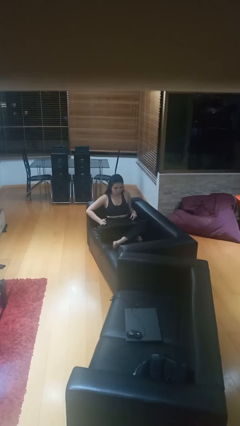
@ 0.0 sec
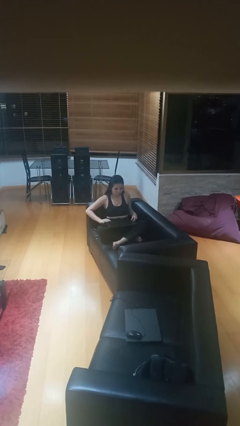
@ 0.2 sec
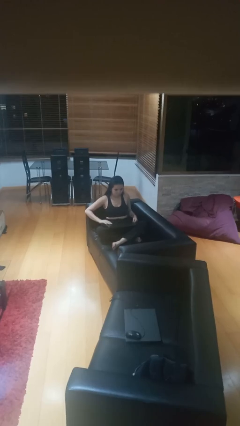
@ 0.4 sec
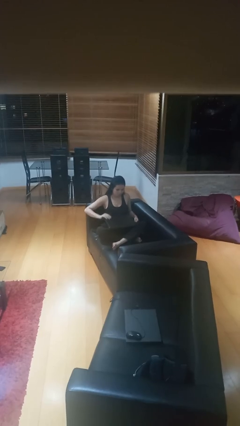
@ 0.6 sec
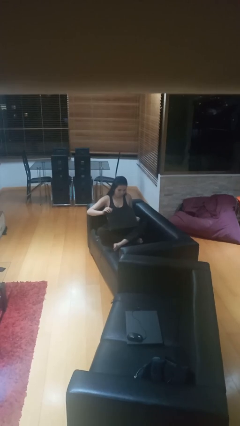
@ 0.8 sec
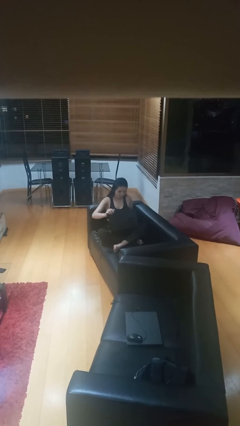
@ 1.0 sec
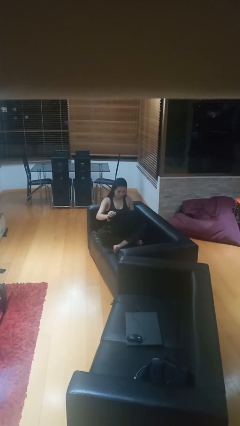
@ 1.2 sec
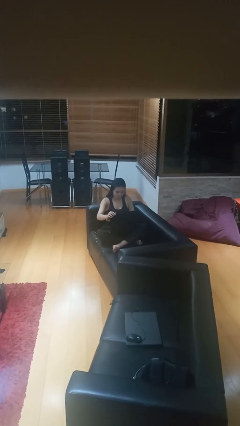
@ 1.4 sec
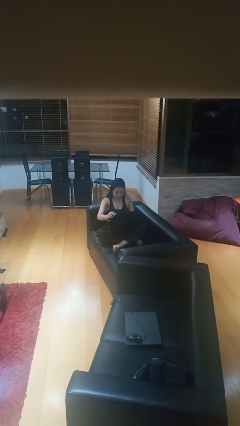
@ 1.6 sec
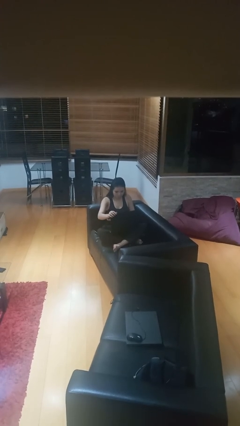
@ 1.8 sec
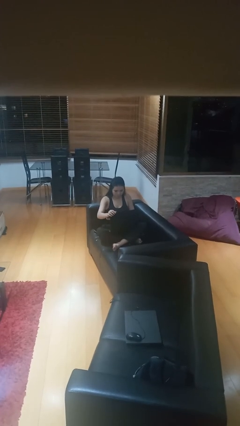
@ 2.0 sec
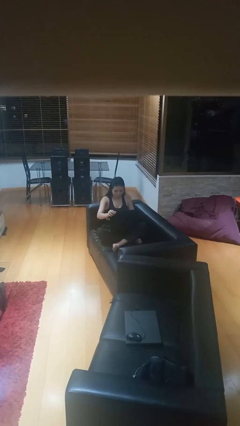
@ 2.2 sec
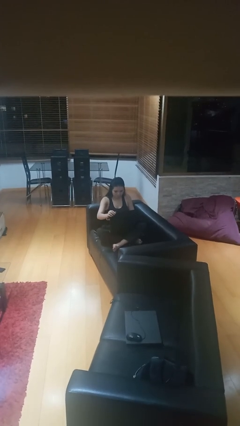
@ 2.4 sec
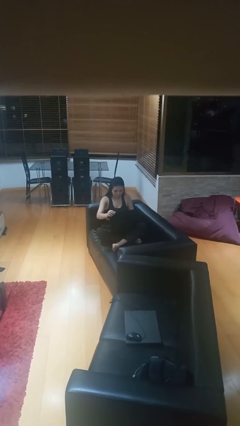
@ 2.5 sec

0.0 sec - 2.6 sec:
person interacts with laptop

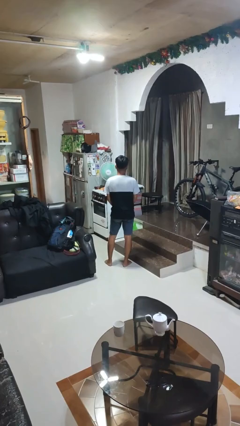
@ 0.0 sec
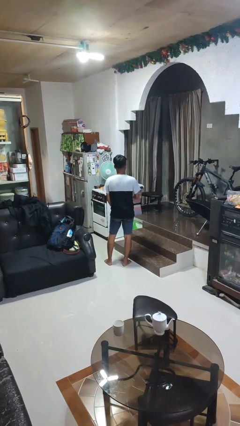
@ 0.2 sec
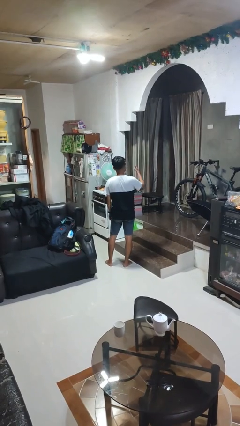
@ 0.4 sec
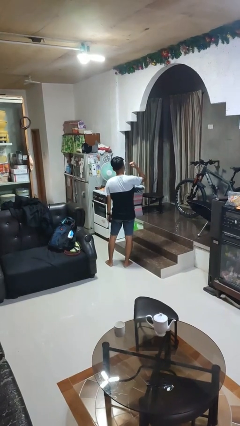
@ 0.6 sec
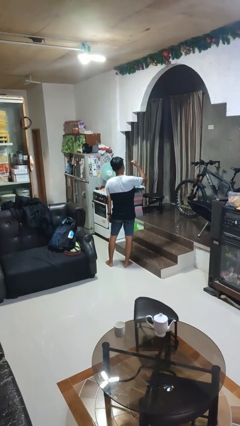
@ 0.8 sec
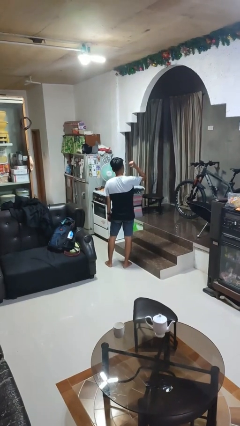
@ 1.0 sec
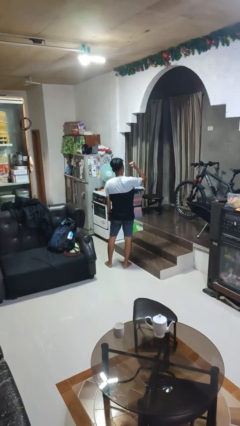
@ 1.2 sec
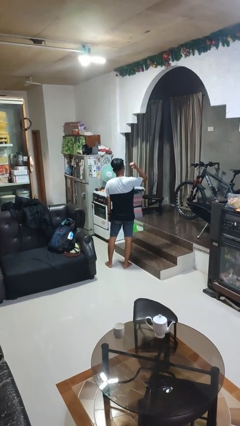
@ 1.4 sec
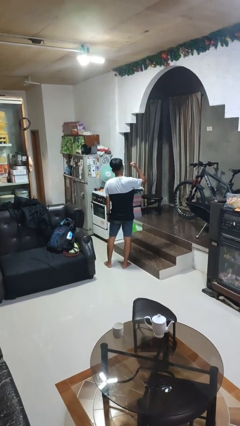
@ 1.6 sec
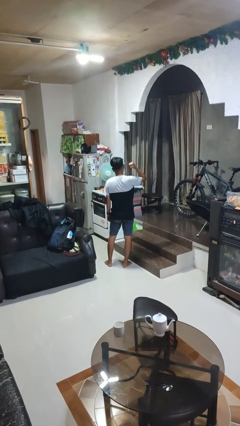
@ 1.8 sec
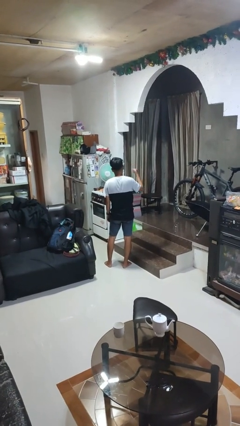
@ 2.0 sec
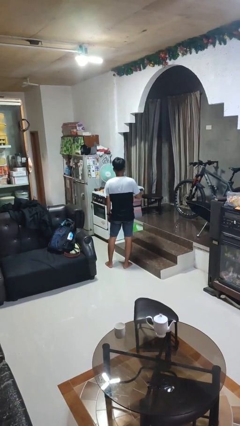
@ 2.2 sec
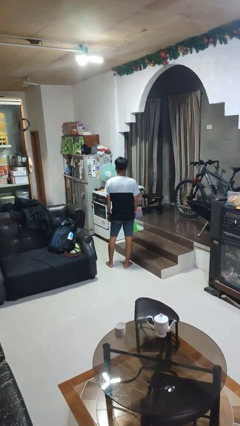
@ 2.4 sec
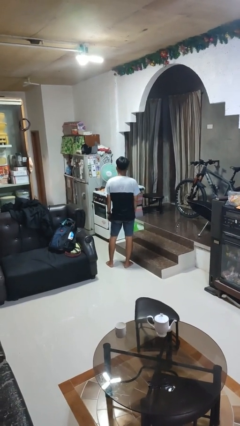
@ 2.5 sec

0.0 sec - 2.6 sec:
person gestures behind me

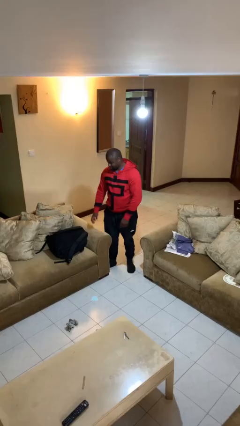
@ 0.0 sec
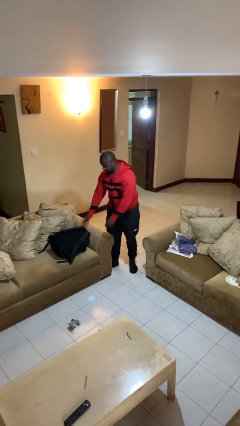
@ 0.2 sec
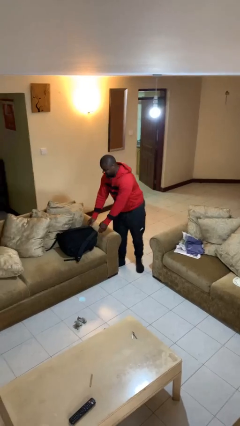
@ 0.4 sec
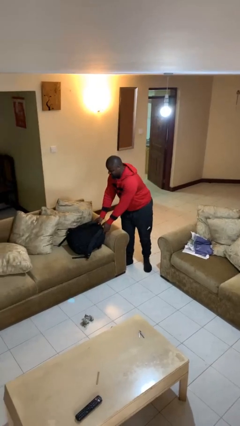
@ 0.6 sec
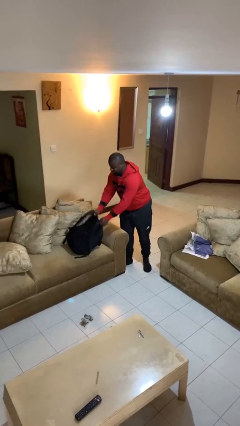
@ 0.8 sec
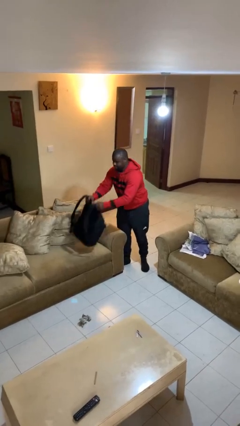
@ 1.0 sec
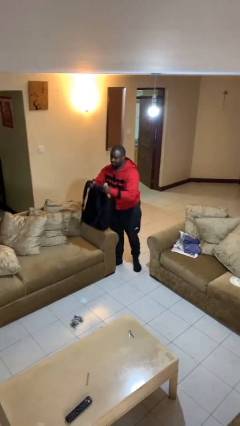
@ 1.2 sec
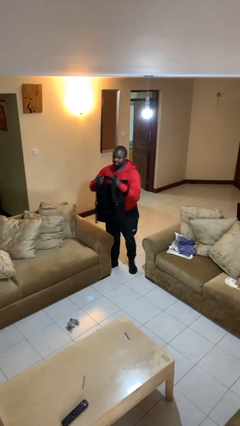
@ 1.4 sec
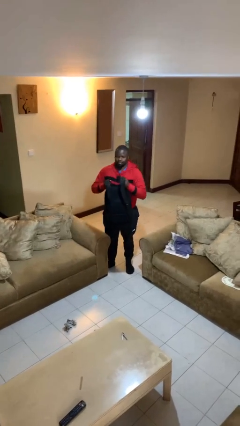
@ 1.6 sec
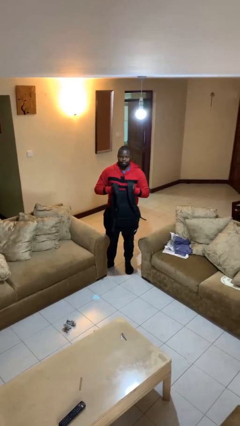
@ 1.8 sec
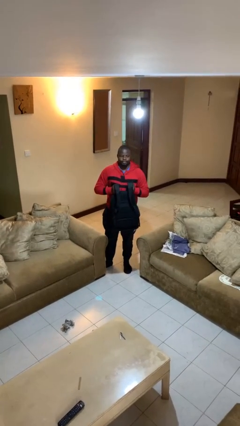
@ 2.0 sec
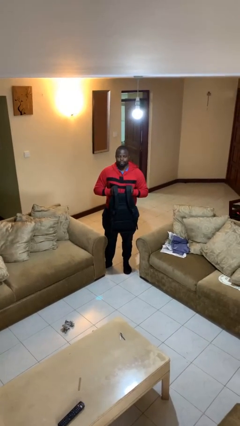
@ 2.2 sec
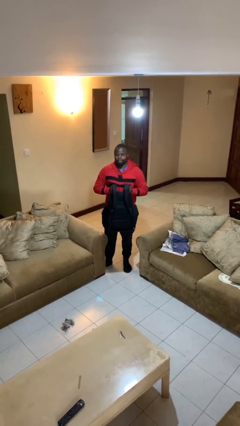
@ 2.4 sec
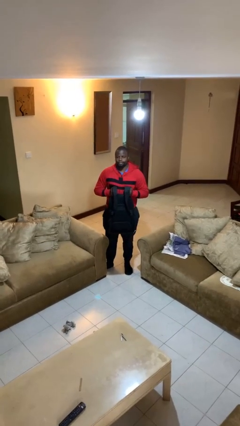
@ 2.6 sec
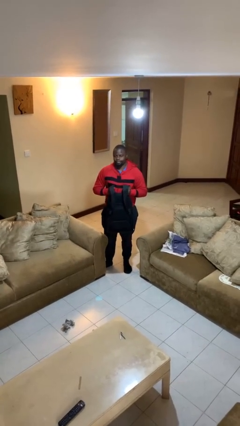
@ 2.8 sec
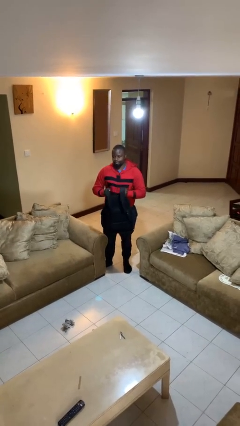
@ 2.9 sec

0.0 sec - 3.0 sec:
person picks up object from couch

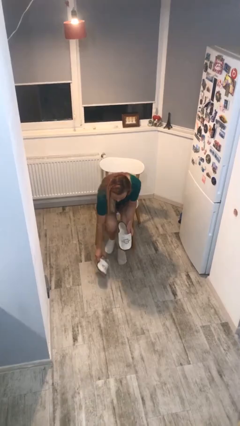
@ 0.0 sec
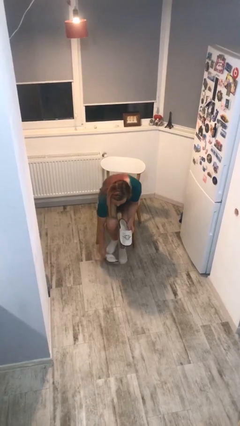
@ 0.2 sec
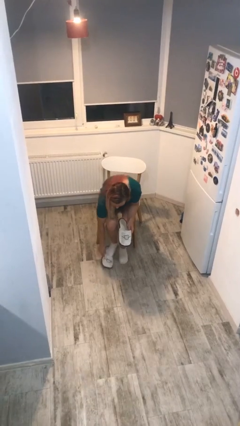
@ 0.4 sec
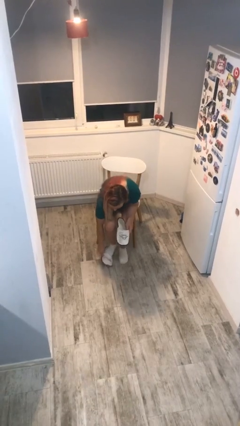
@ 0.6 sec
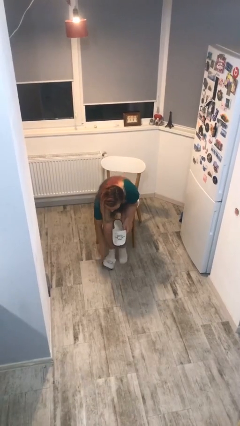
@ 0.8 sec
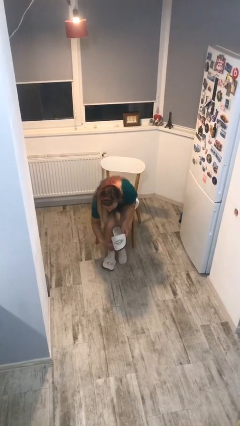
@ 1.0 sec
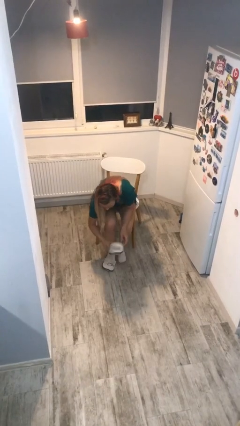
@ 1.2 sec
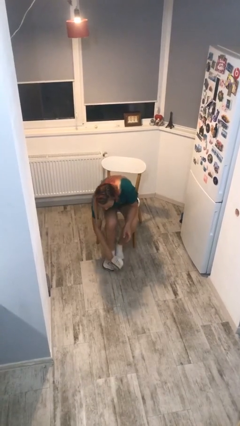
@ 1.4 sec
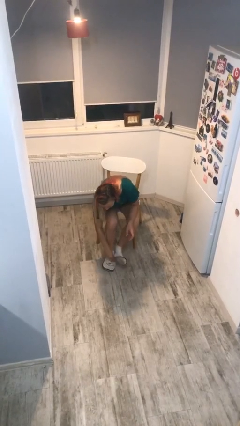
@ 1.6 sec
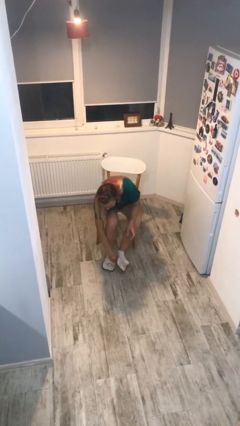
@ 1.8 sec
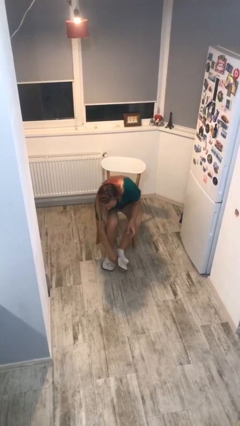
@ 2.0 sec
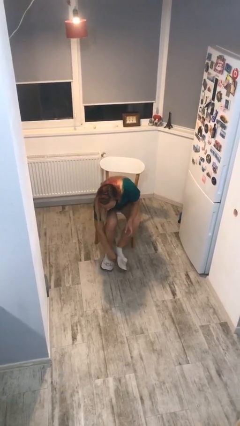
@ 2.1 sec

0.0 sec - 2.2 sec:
person puts on shoes

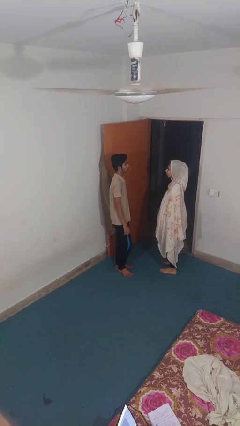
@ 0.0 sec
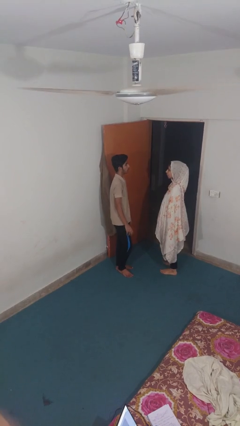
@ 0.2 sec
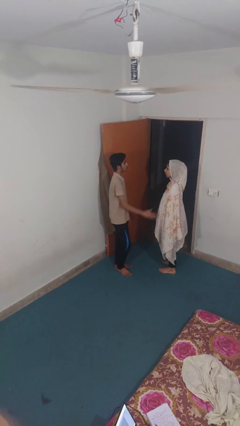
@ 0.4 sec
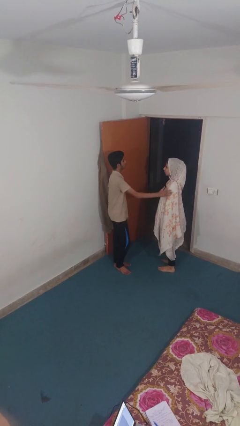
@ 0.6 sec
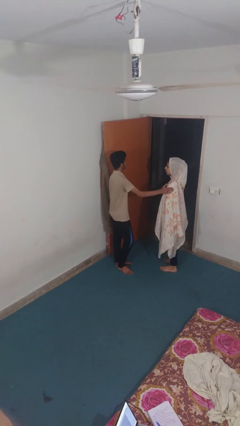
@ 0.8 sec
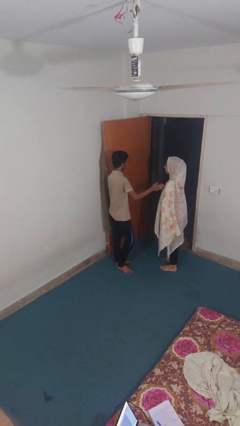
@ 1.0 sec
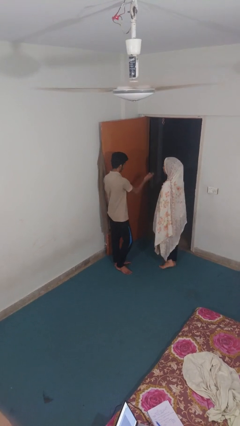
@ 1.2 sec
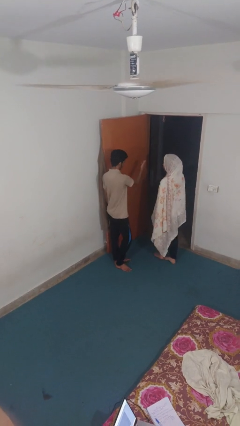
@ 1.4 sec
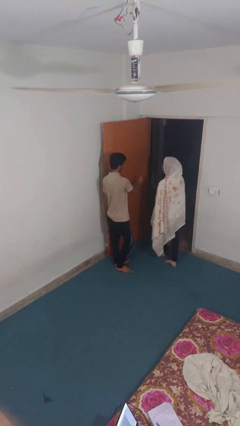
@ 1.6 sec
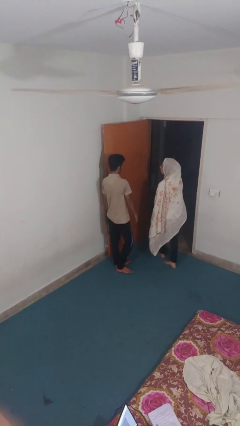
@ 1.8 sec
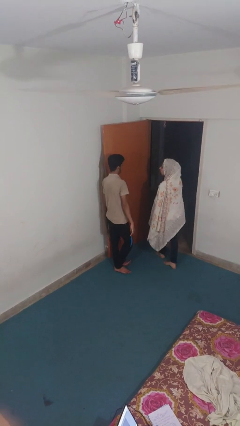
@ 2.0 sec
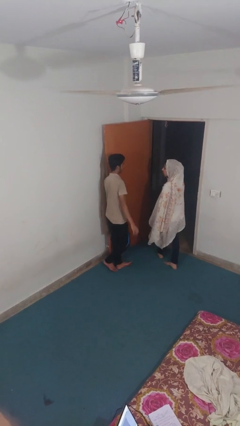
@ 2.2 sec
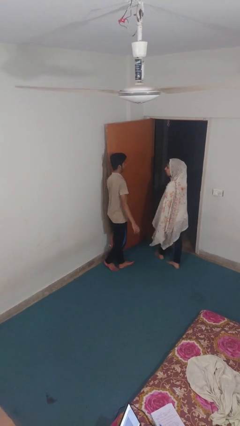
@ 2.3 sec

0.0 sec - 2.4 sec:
person shoves person

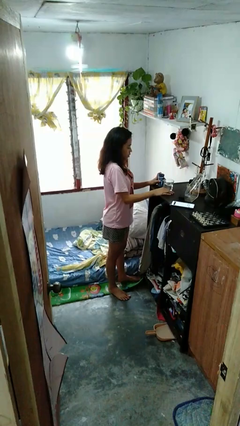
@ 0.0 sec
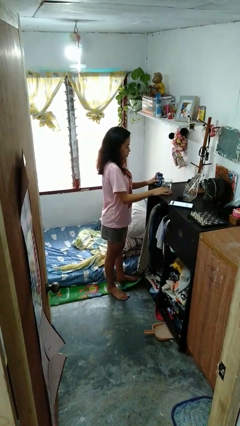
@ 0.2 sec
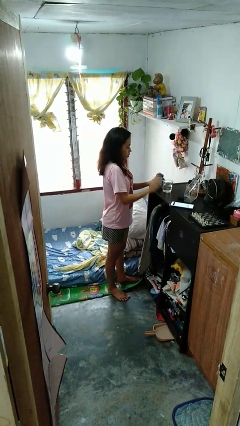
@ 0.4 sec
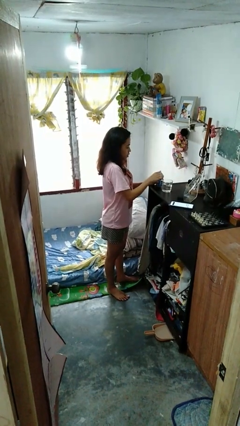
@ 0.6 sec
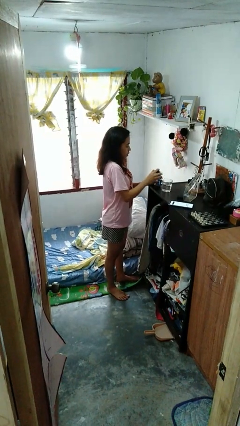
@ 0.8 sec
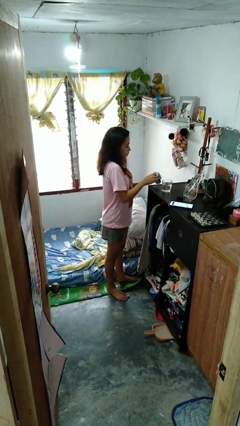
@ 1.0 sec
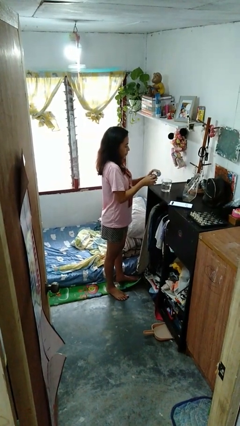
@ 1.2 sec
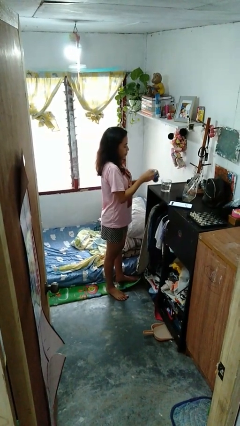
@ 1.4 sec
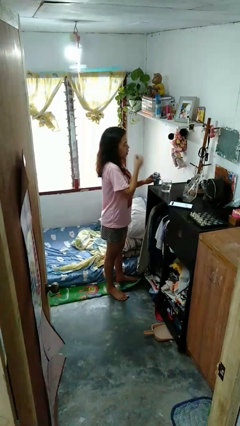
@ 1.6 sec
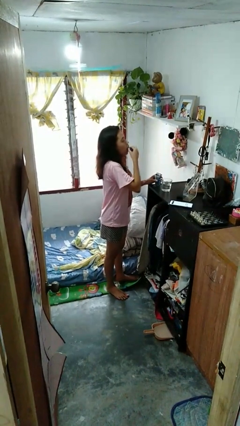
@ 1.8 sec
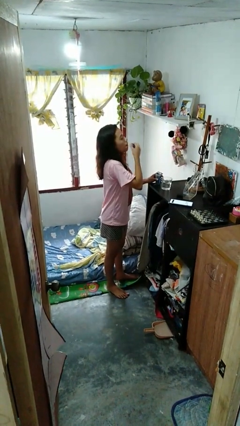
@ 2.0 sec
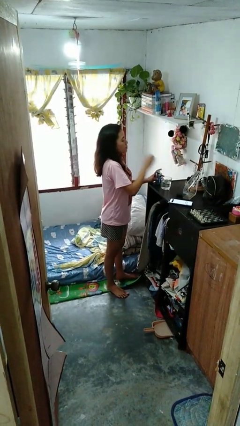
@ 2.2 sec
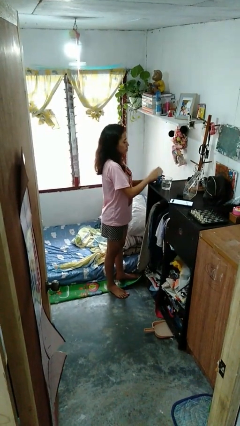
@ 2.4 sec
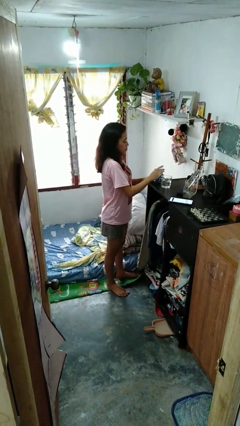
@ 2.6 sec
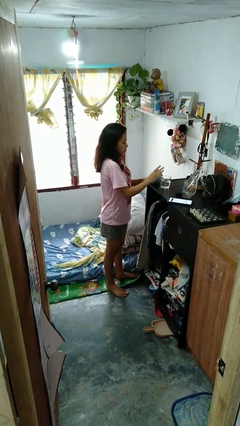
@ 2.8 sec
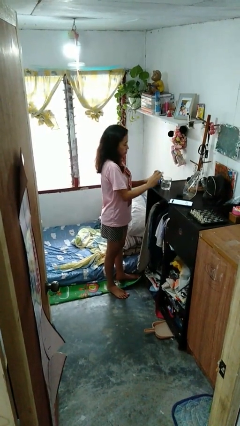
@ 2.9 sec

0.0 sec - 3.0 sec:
person takes medicine pills

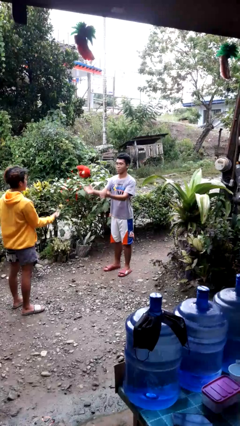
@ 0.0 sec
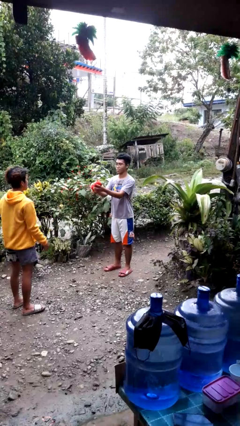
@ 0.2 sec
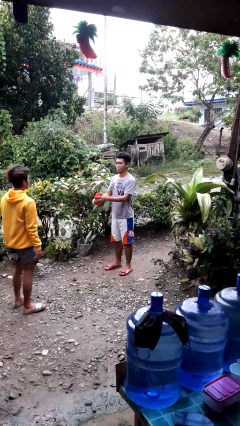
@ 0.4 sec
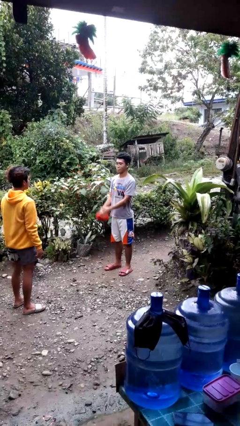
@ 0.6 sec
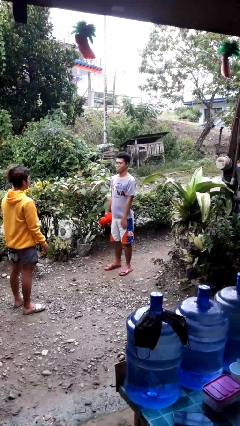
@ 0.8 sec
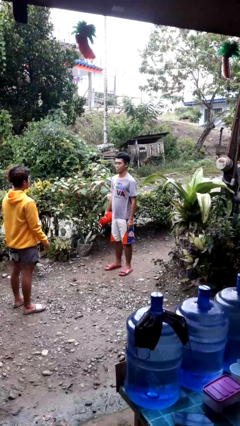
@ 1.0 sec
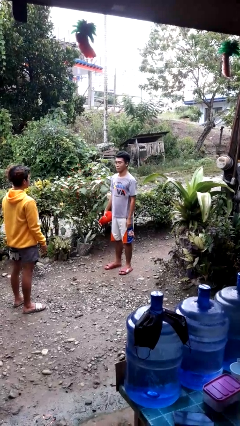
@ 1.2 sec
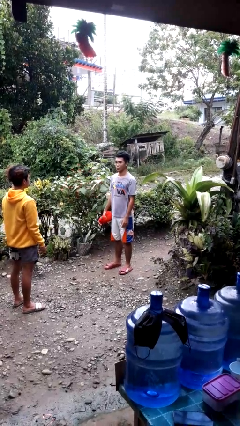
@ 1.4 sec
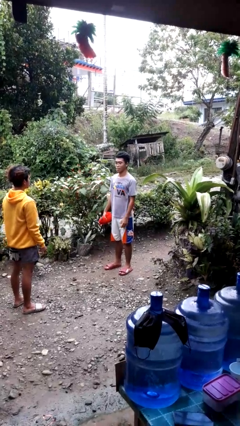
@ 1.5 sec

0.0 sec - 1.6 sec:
person catches object from person
